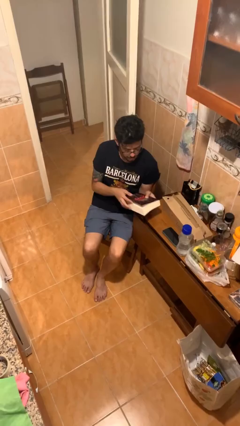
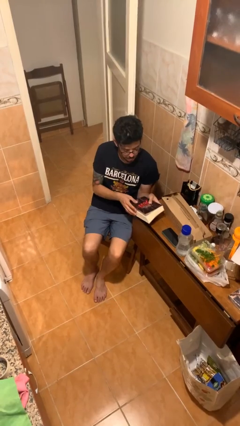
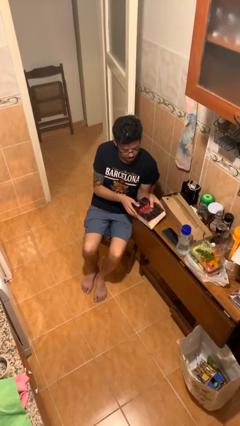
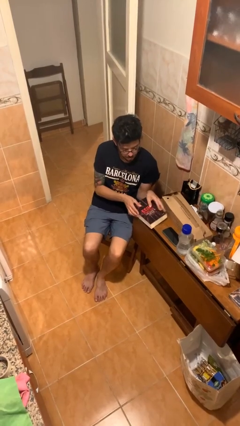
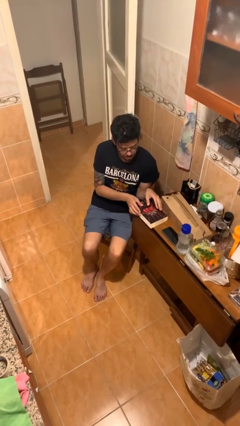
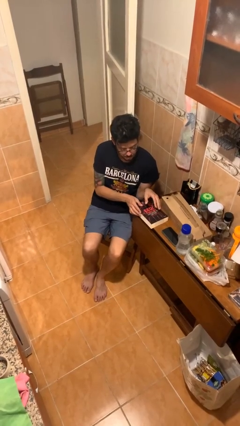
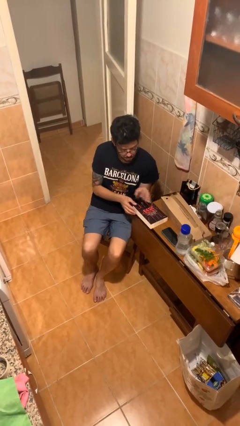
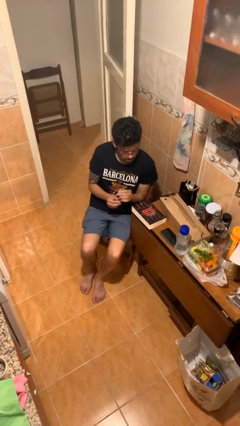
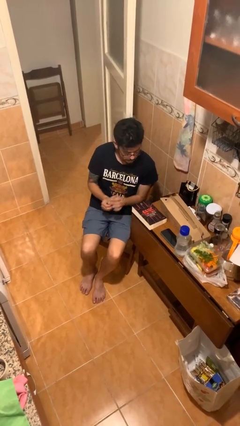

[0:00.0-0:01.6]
person puts down object on table

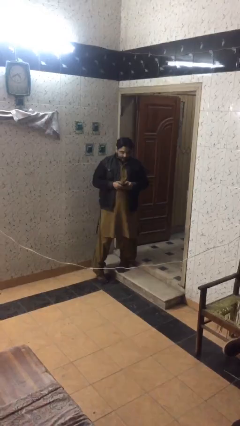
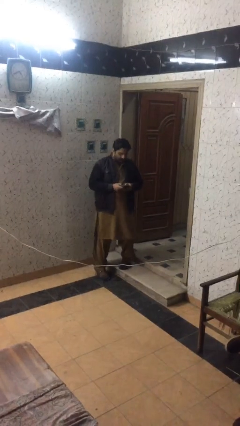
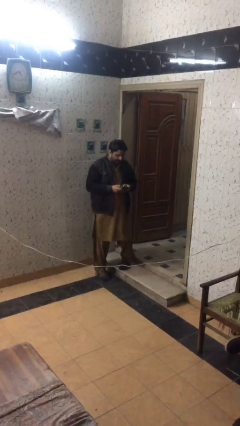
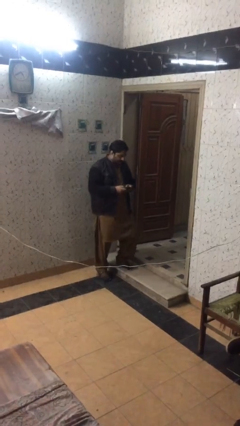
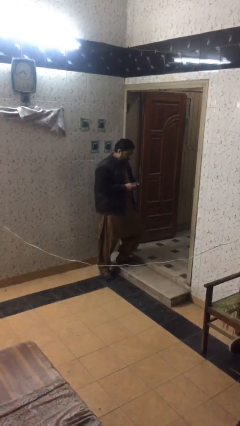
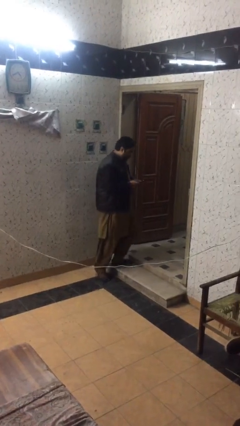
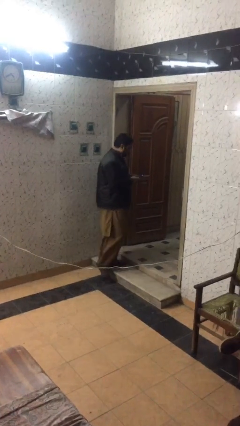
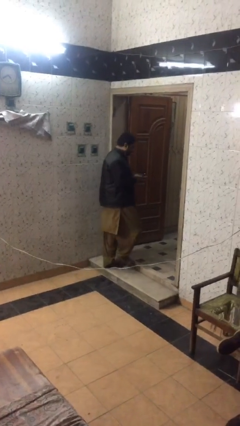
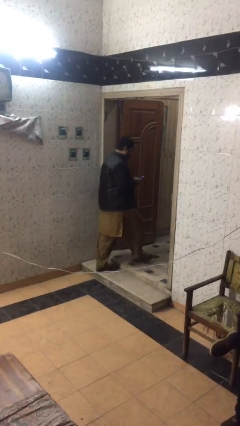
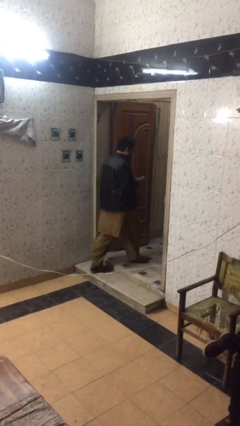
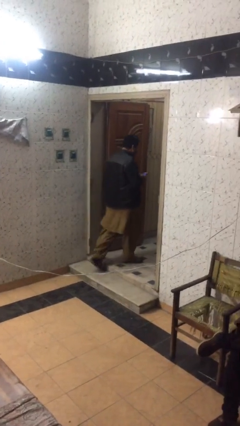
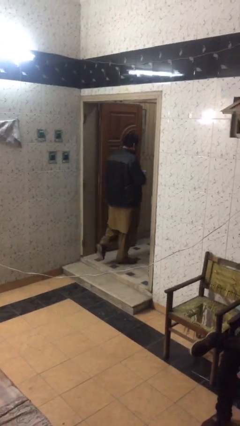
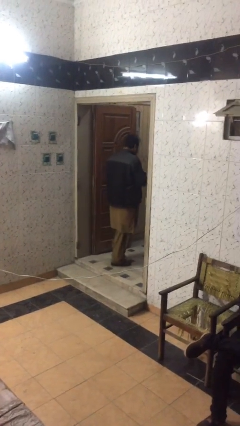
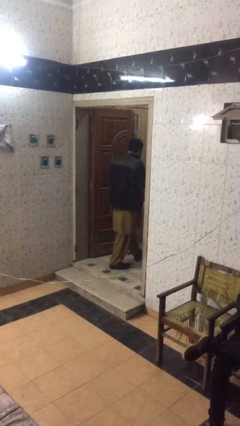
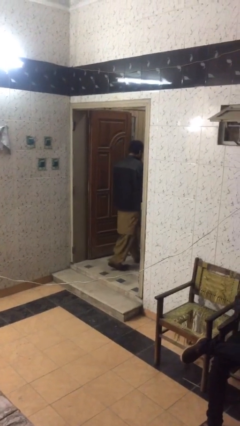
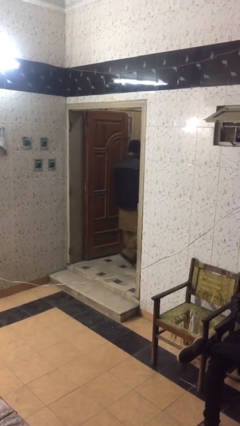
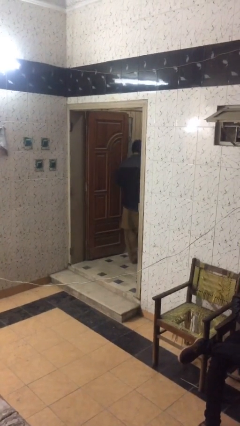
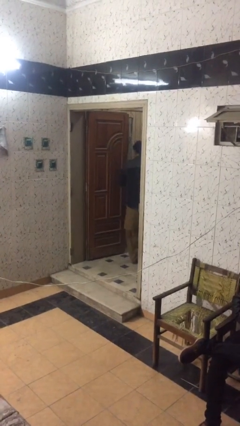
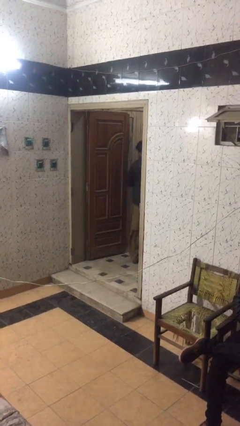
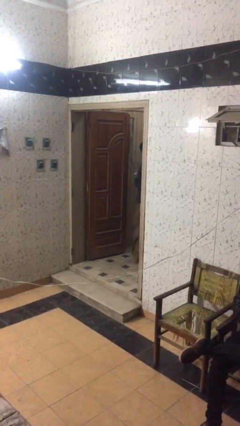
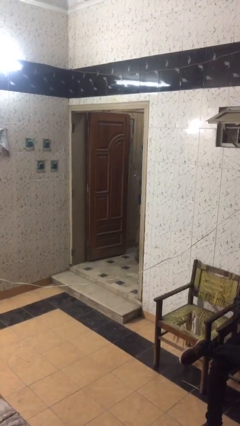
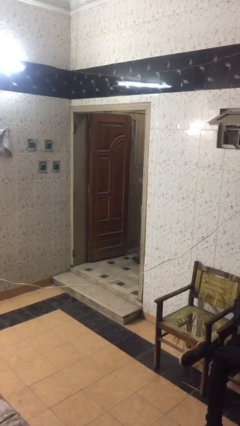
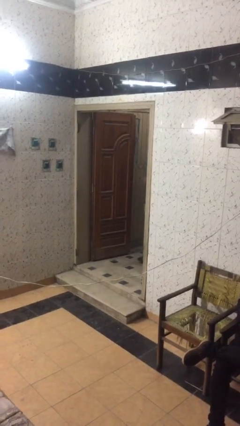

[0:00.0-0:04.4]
person exits scene through structure

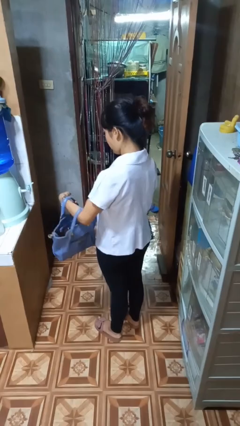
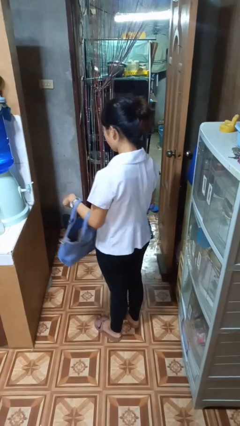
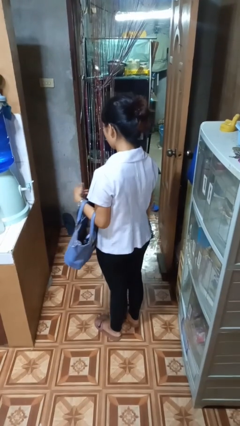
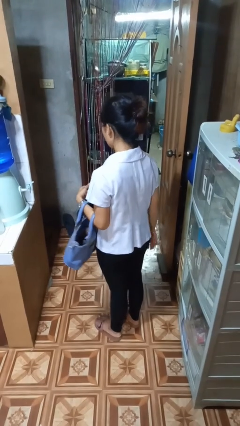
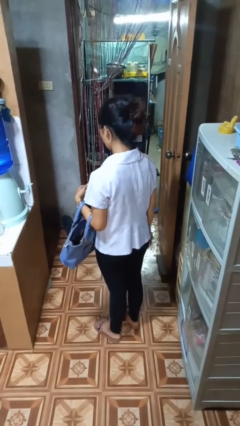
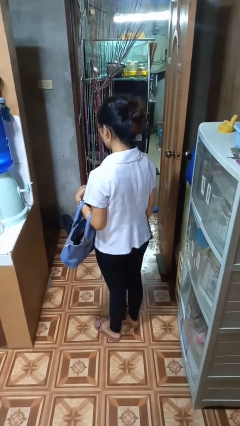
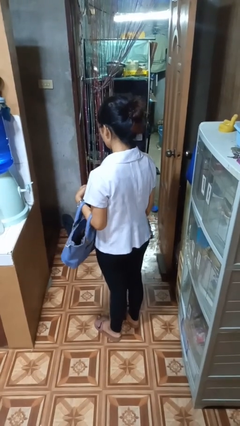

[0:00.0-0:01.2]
person puts object into purse

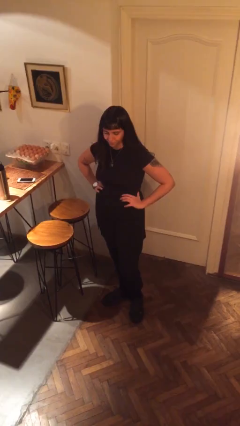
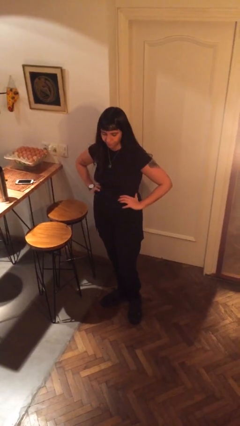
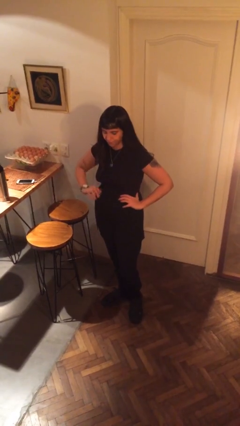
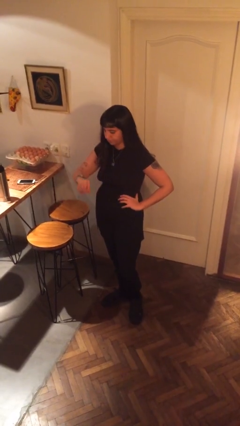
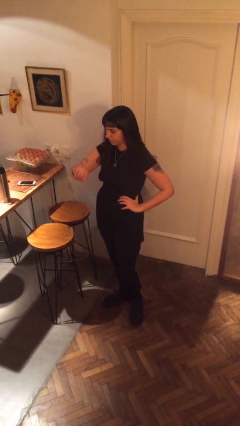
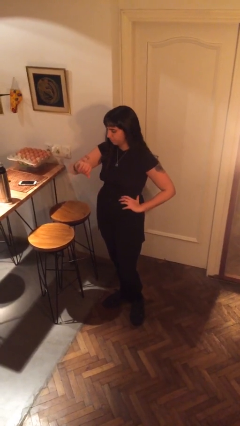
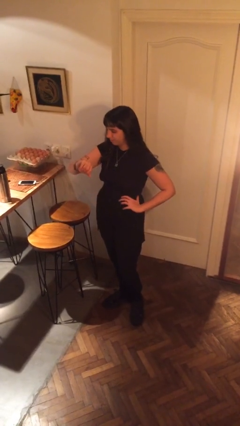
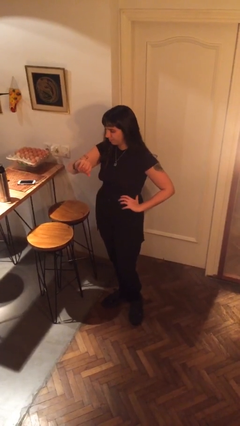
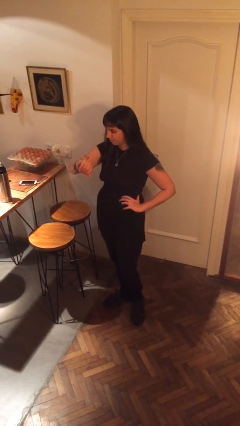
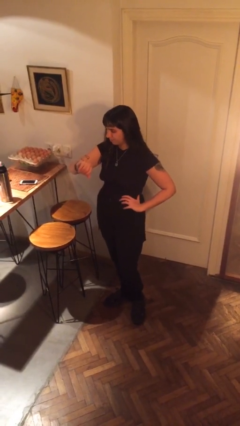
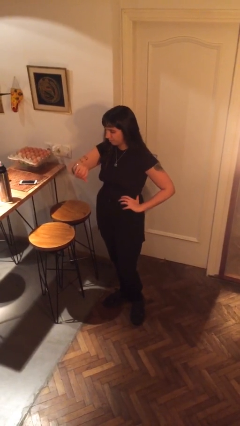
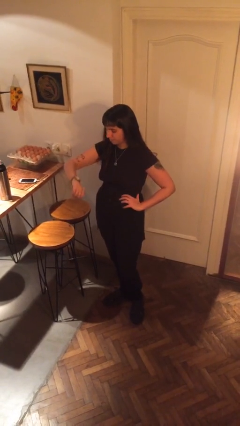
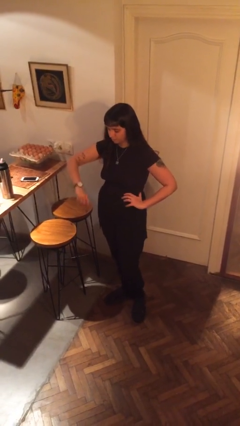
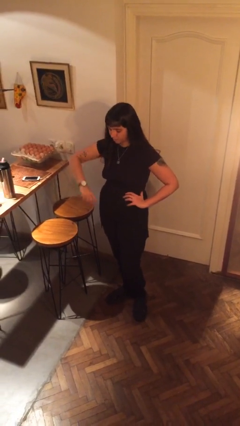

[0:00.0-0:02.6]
person looks at wristwatch

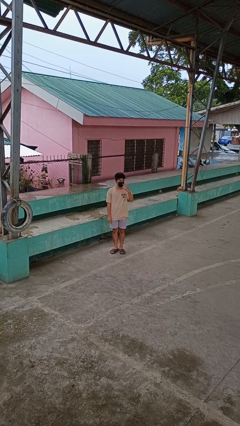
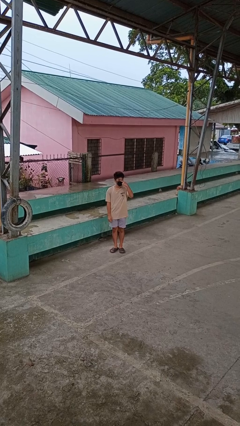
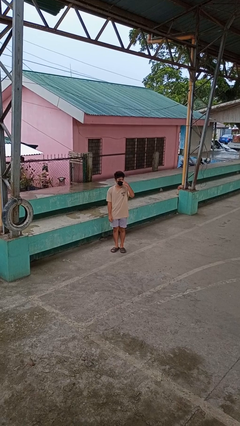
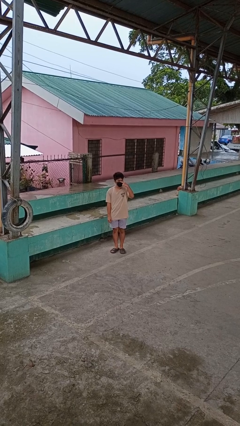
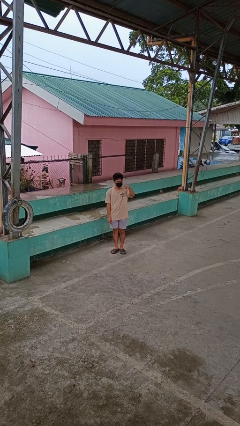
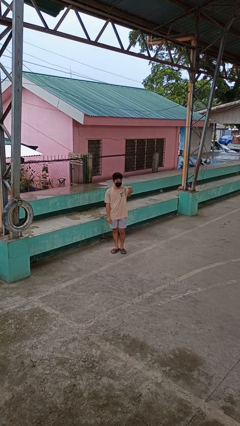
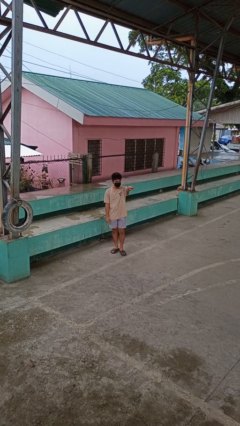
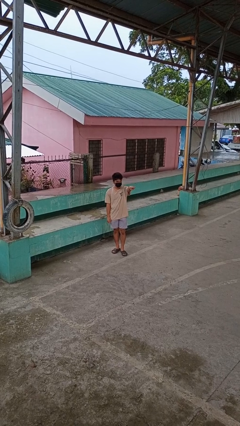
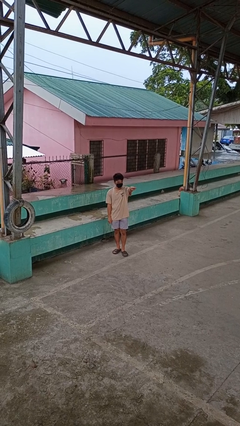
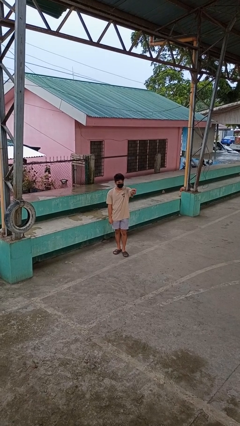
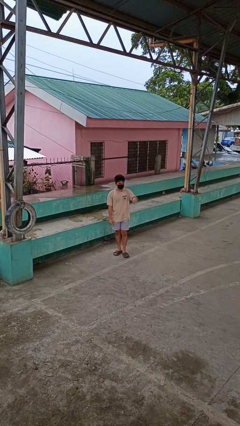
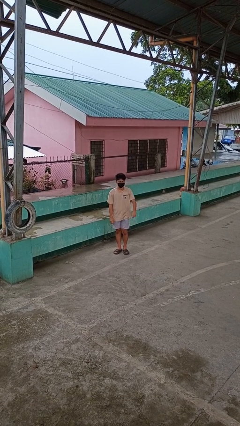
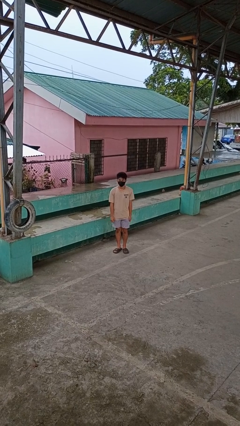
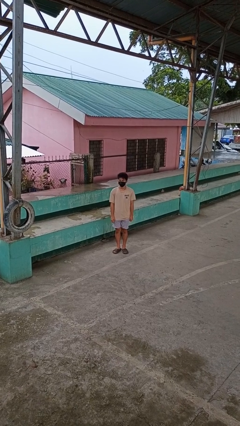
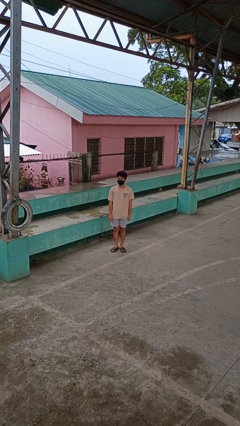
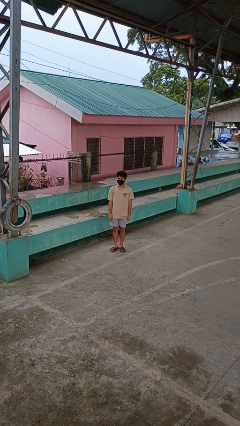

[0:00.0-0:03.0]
person gestures watch closely

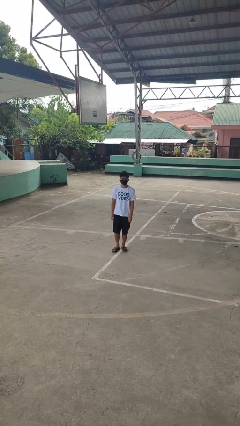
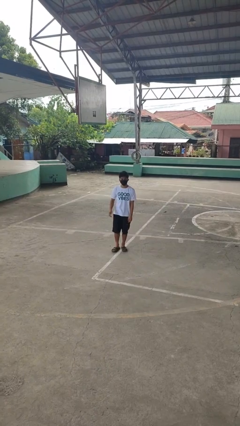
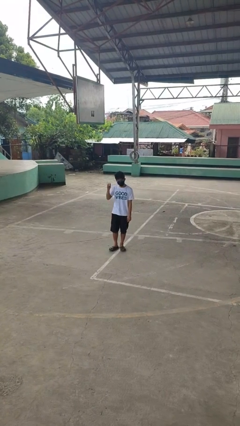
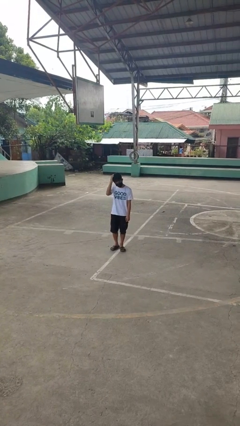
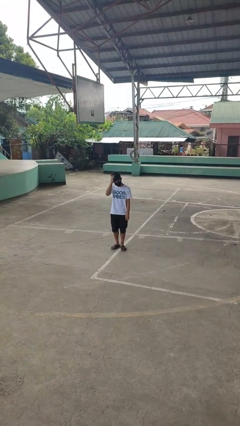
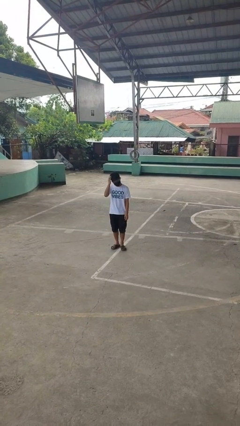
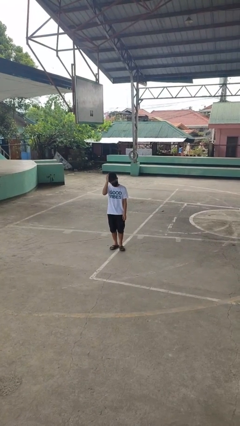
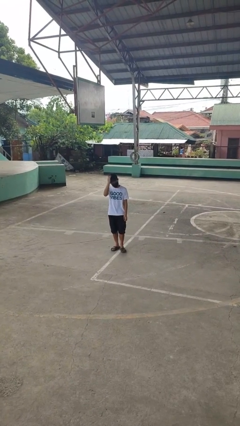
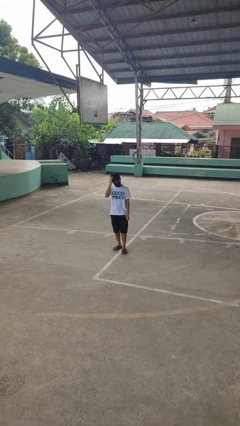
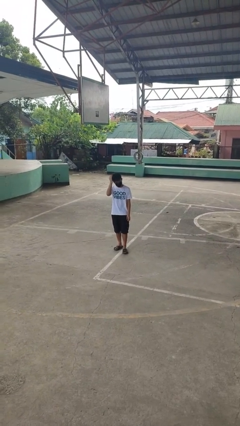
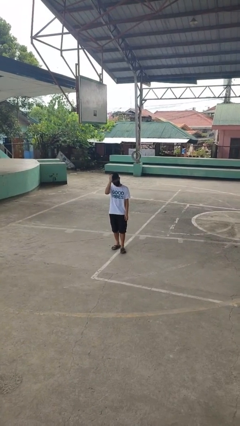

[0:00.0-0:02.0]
person pats head

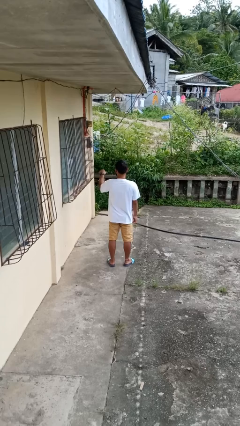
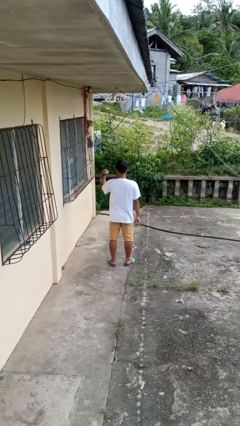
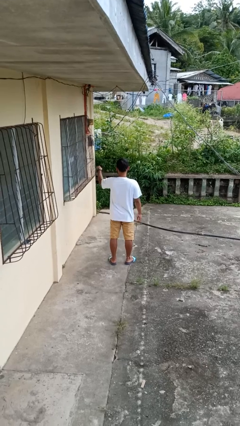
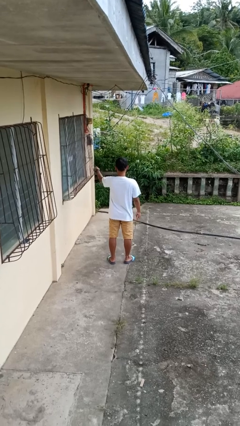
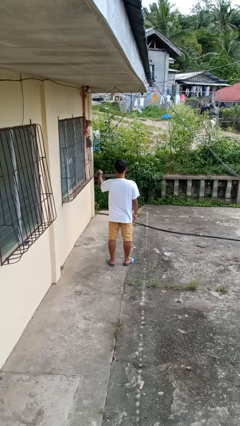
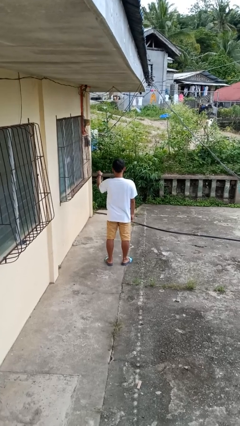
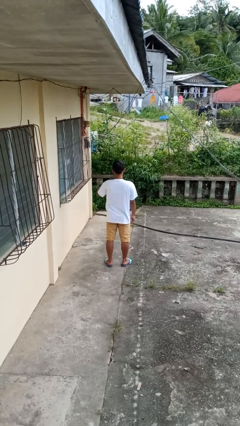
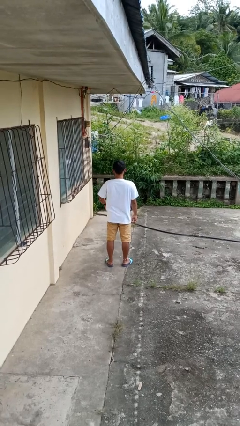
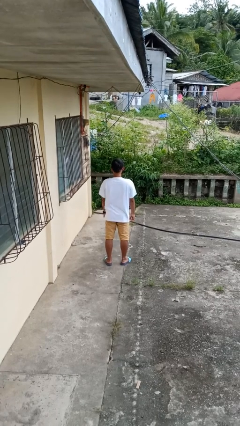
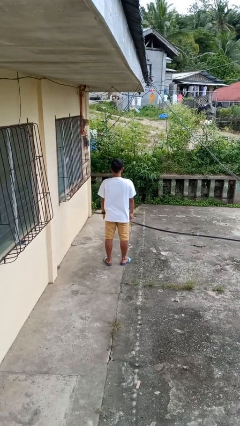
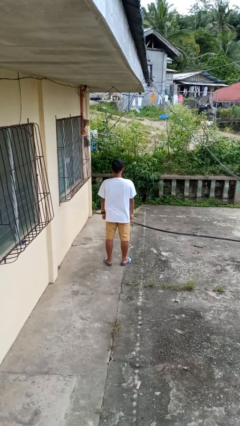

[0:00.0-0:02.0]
person punches

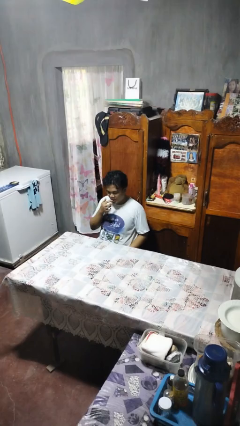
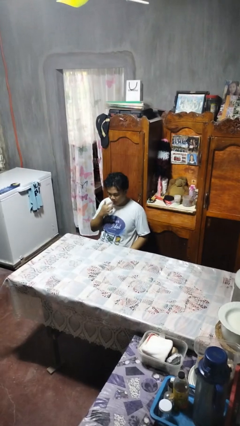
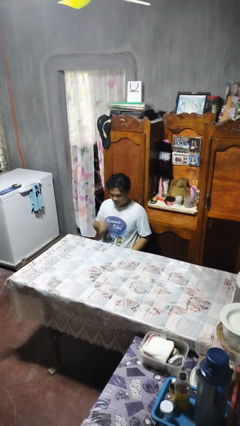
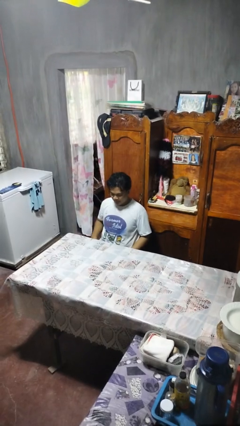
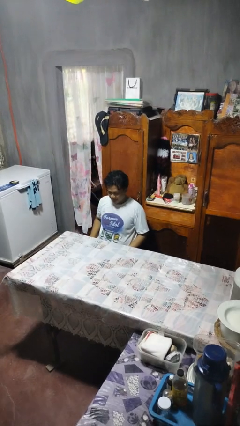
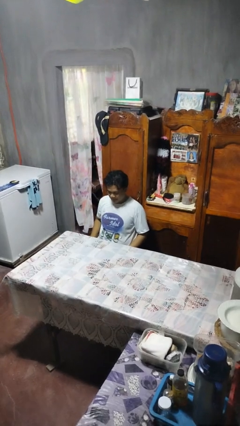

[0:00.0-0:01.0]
person licks fingers
